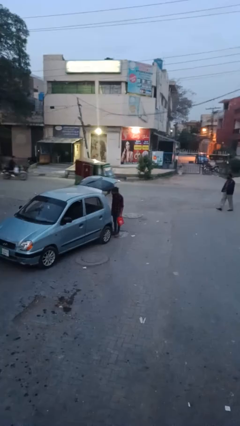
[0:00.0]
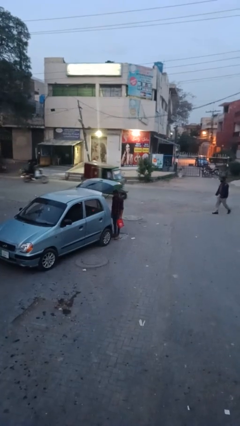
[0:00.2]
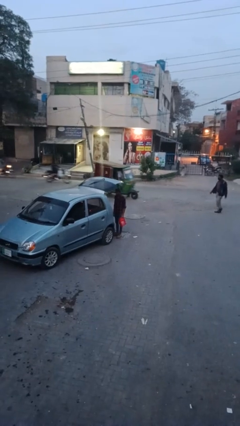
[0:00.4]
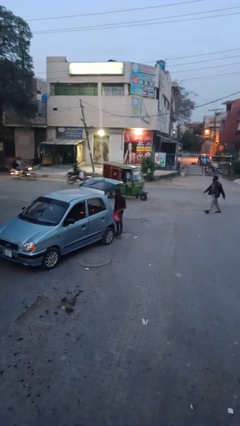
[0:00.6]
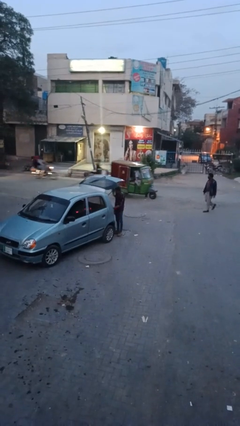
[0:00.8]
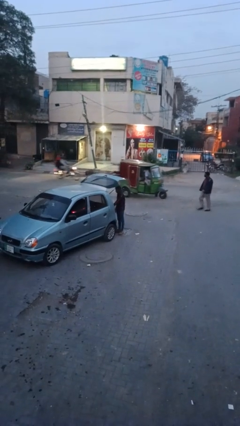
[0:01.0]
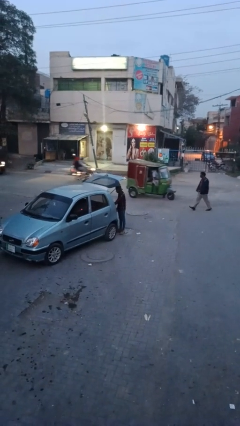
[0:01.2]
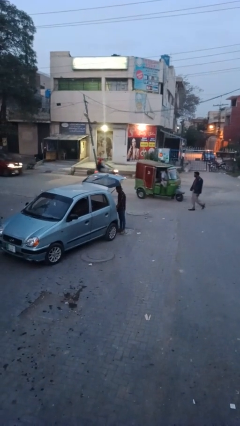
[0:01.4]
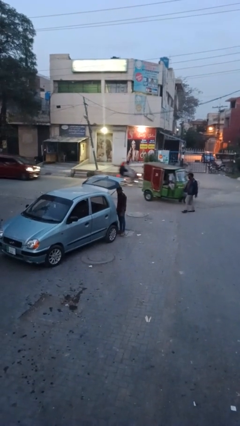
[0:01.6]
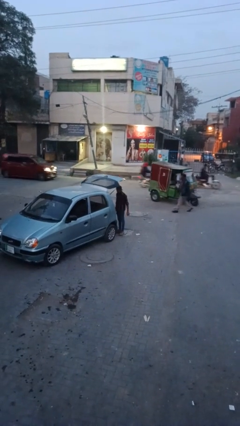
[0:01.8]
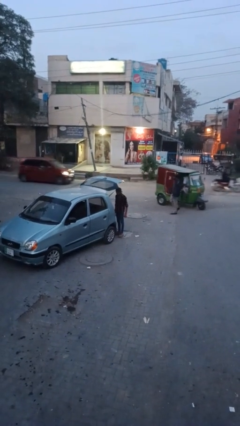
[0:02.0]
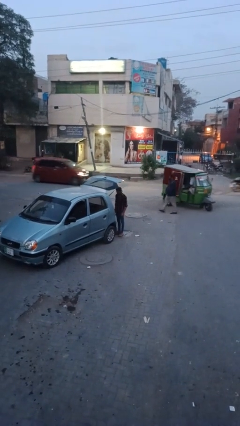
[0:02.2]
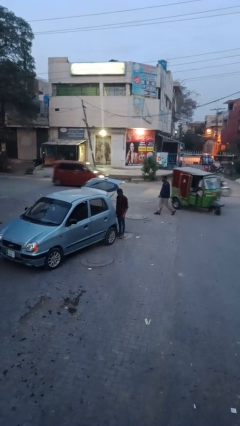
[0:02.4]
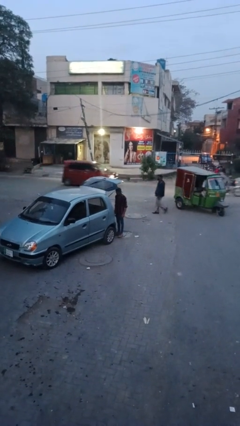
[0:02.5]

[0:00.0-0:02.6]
person loads car

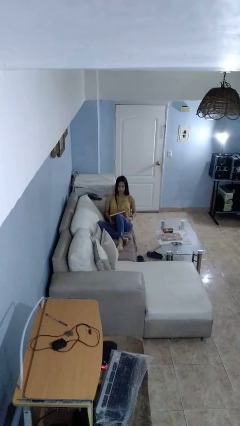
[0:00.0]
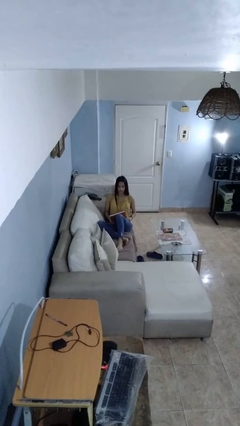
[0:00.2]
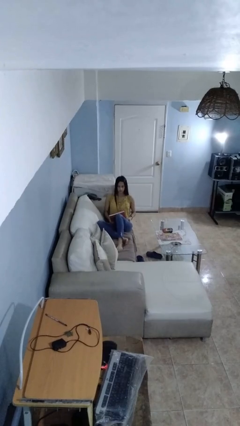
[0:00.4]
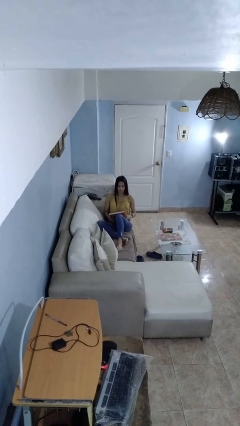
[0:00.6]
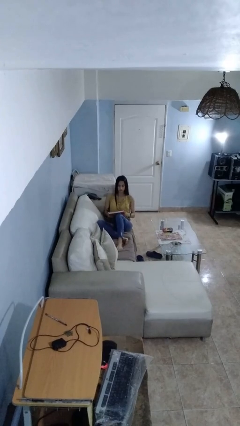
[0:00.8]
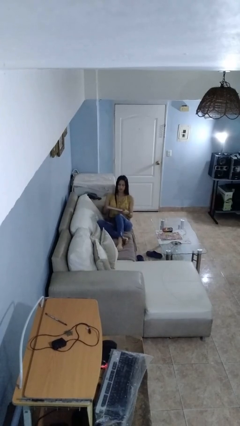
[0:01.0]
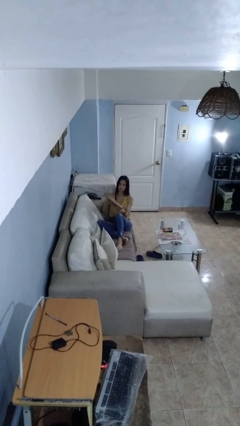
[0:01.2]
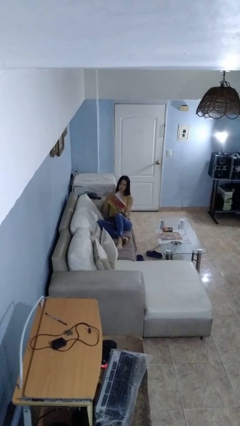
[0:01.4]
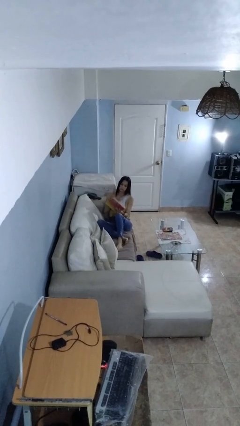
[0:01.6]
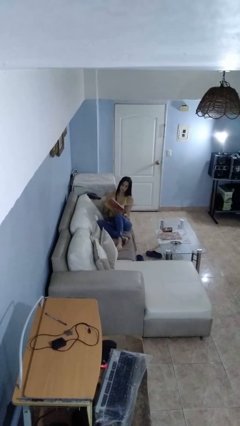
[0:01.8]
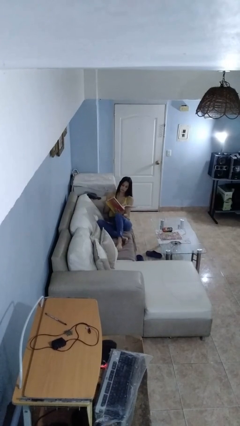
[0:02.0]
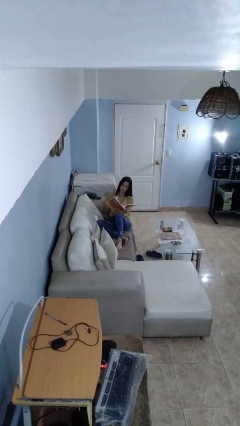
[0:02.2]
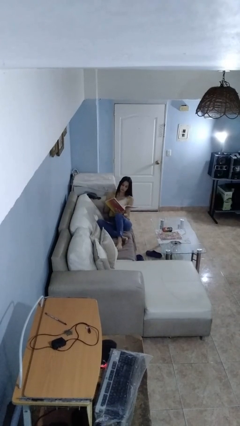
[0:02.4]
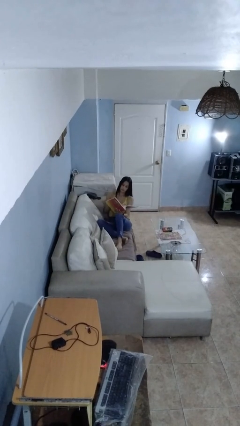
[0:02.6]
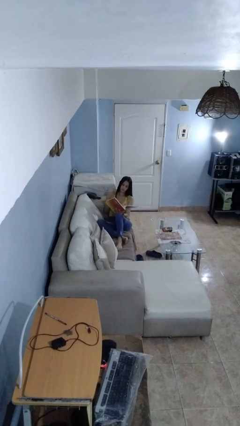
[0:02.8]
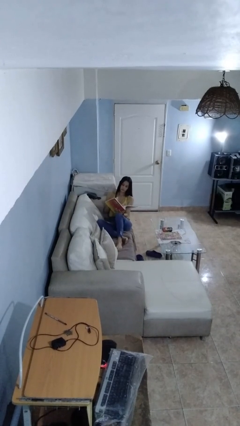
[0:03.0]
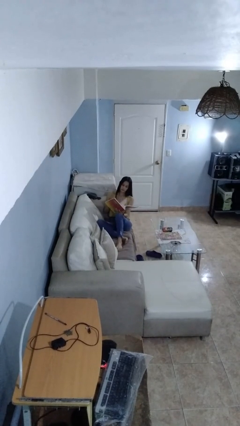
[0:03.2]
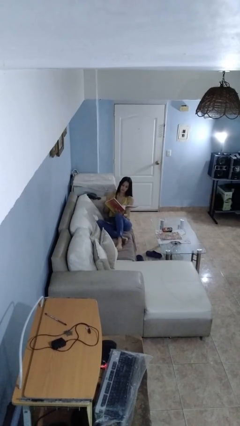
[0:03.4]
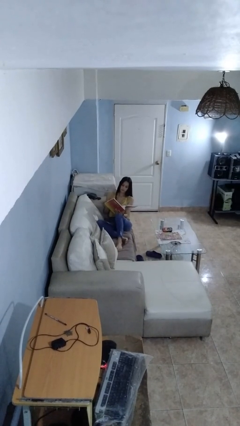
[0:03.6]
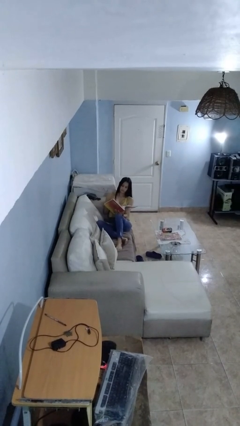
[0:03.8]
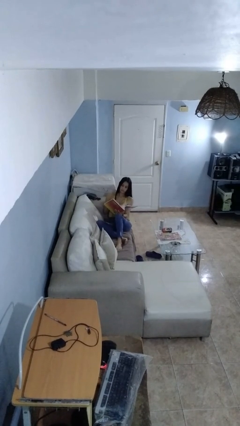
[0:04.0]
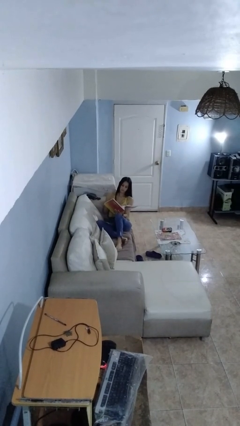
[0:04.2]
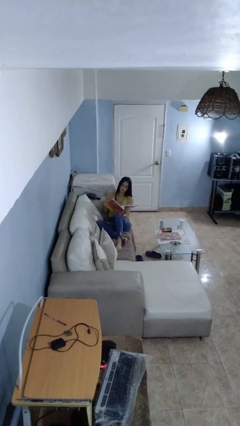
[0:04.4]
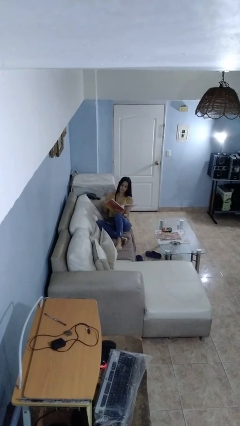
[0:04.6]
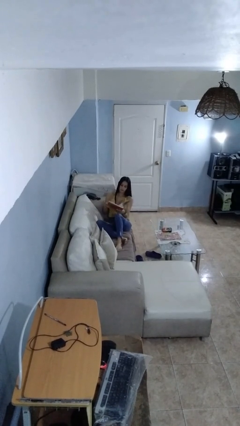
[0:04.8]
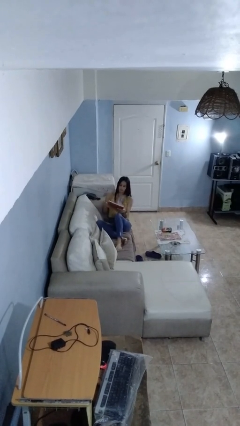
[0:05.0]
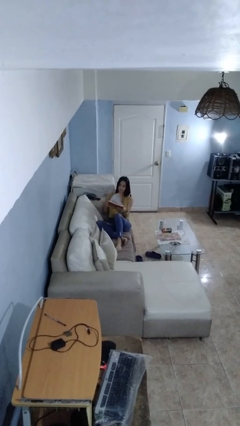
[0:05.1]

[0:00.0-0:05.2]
person reads book

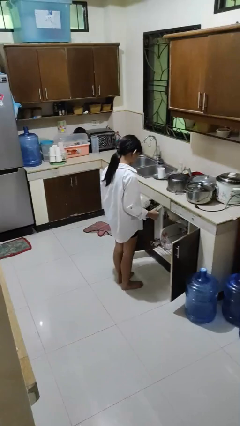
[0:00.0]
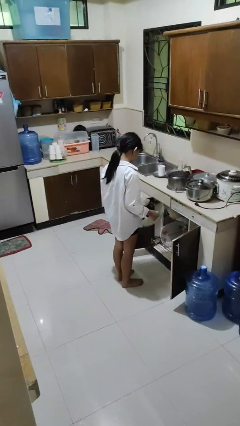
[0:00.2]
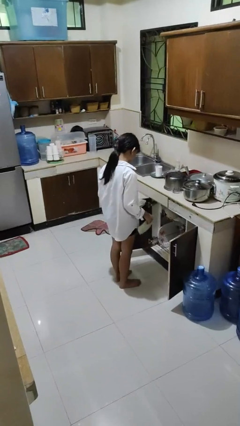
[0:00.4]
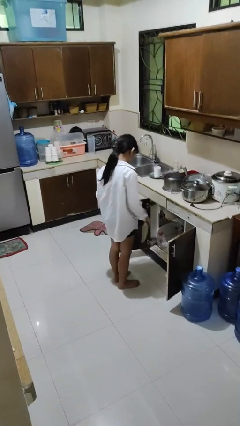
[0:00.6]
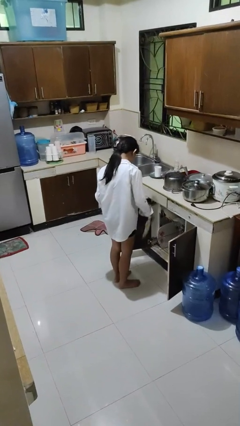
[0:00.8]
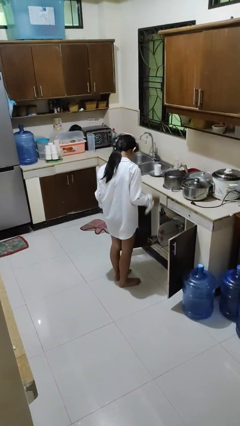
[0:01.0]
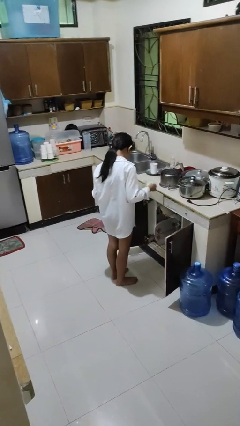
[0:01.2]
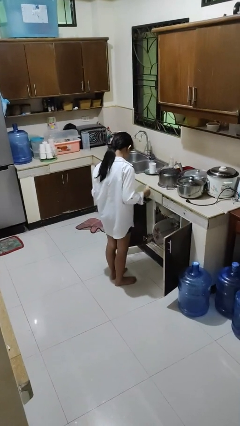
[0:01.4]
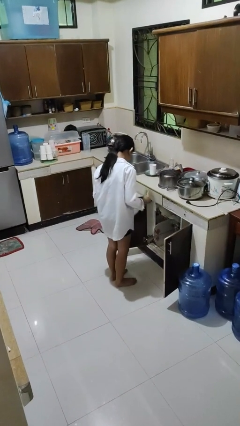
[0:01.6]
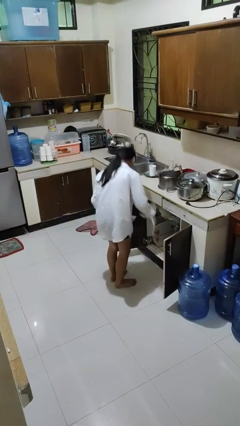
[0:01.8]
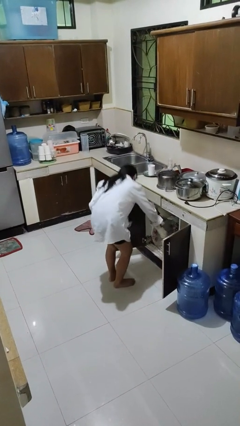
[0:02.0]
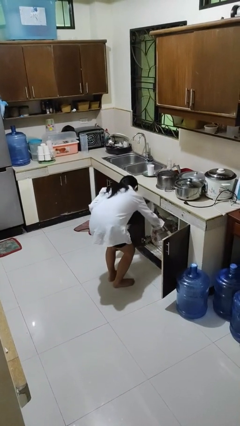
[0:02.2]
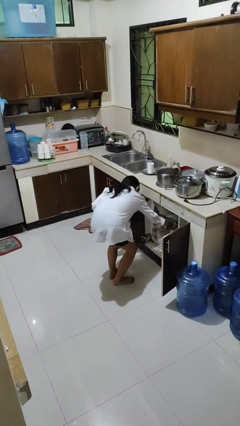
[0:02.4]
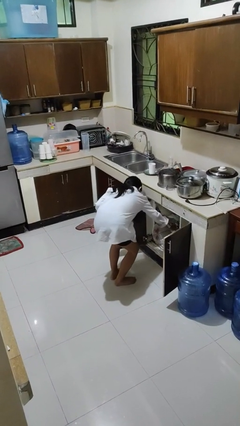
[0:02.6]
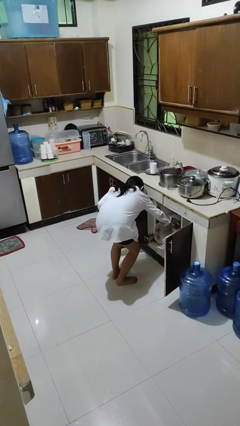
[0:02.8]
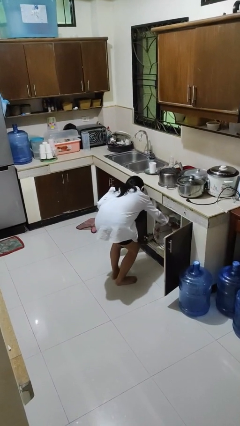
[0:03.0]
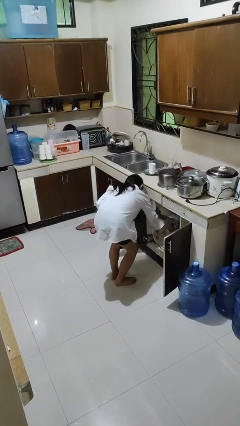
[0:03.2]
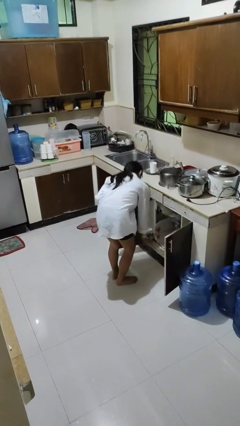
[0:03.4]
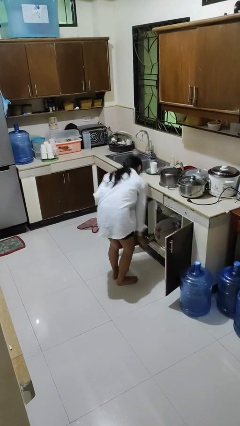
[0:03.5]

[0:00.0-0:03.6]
person loads dishwasher

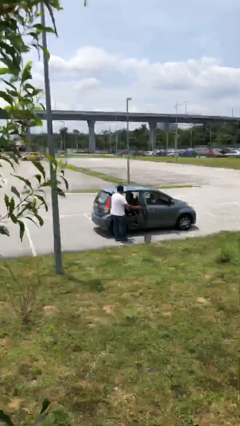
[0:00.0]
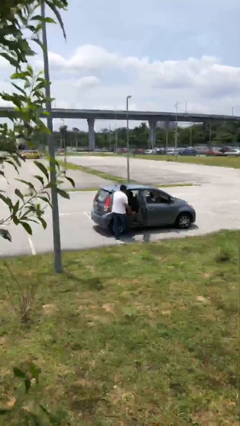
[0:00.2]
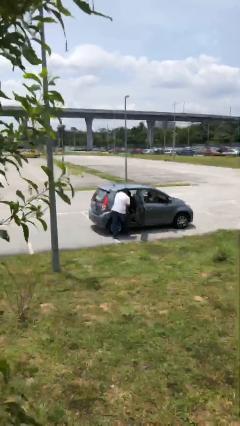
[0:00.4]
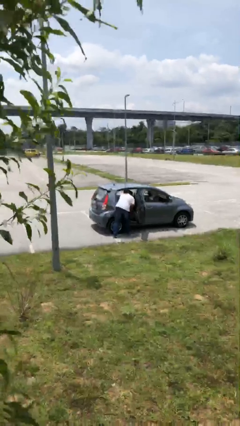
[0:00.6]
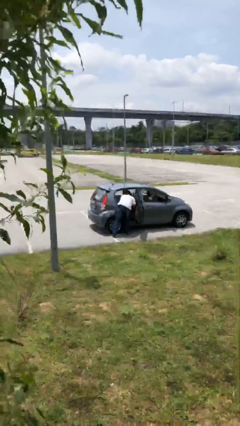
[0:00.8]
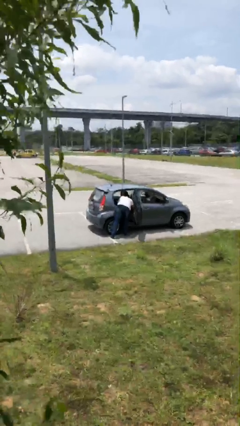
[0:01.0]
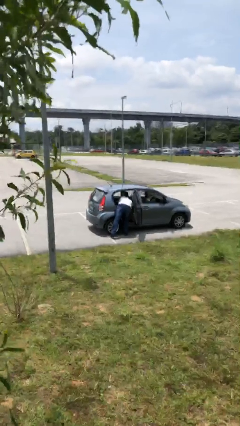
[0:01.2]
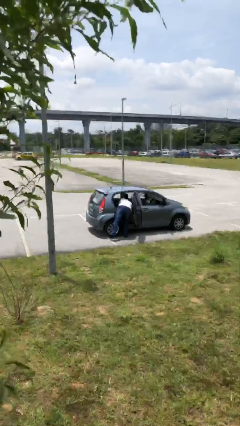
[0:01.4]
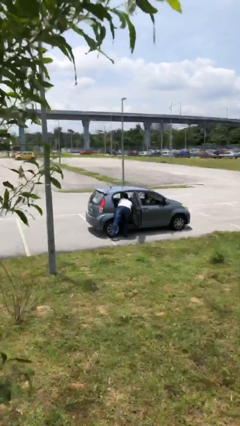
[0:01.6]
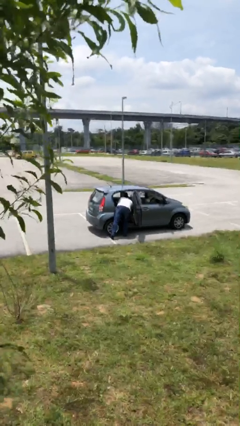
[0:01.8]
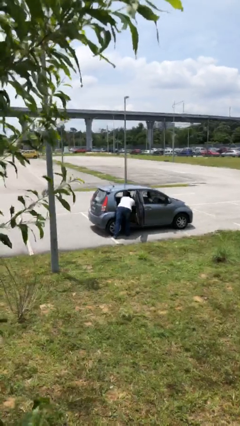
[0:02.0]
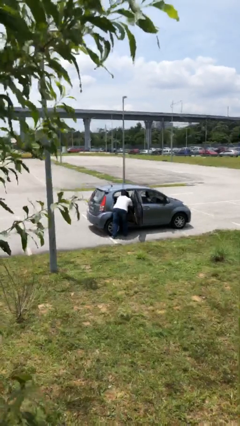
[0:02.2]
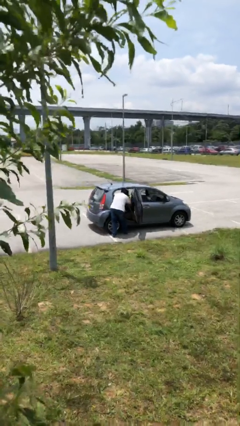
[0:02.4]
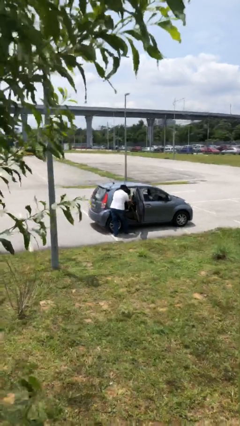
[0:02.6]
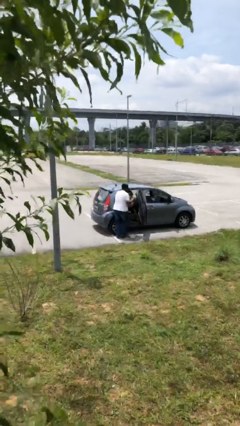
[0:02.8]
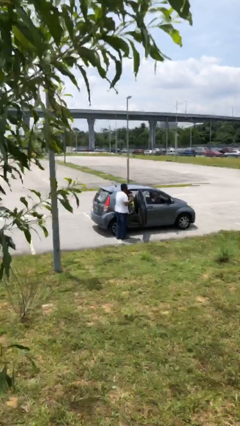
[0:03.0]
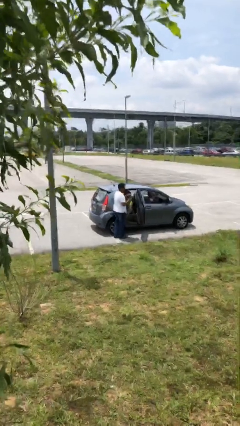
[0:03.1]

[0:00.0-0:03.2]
person unloads car

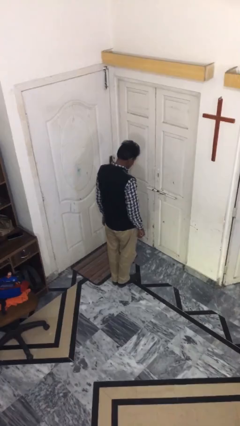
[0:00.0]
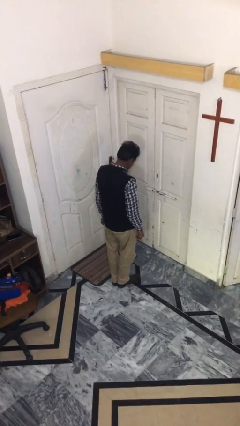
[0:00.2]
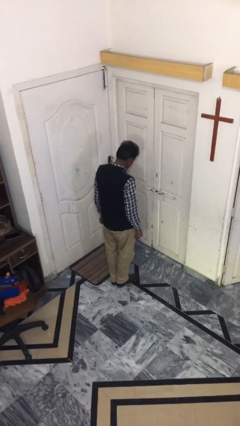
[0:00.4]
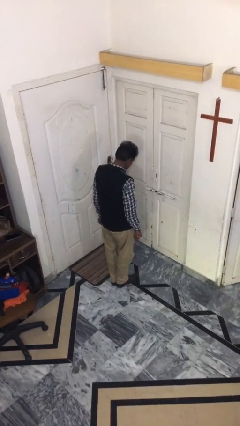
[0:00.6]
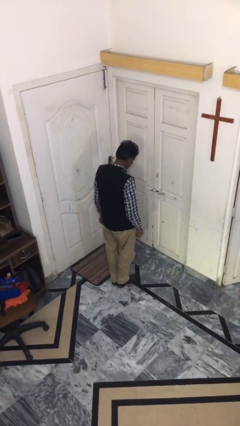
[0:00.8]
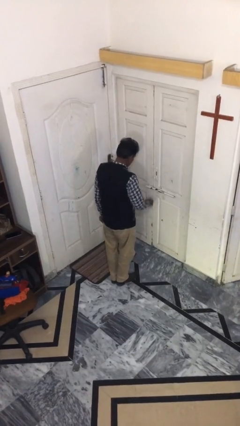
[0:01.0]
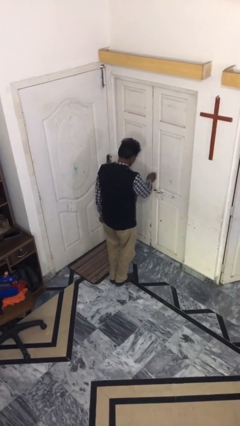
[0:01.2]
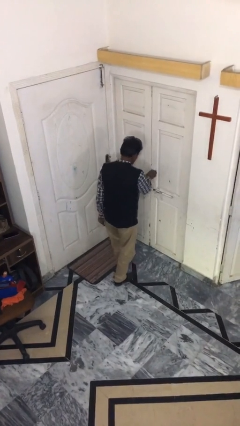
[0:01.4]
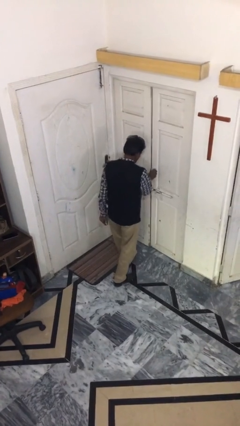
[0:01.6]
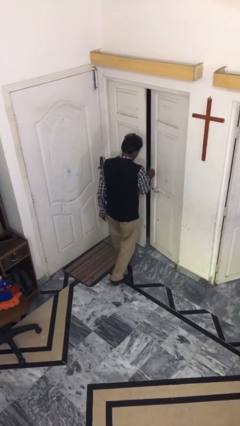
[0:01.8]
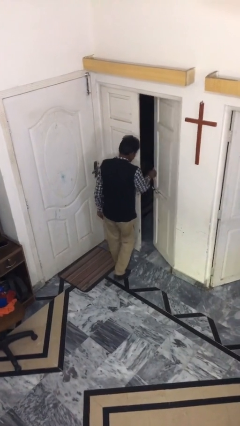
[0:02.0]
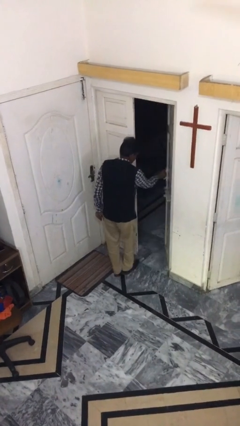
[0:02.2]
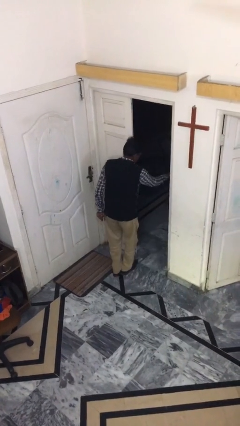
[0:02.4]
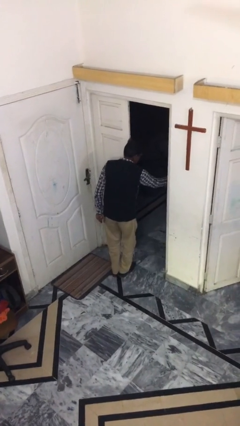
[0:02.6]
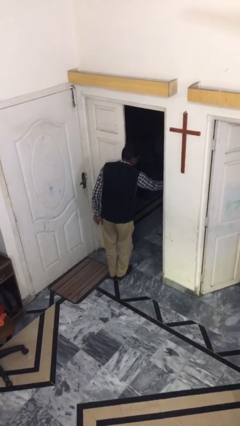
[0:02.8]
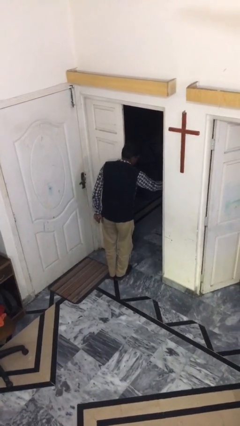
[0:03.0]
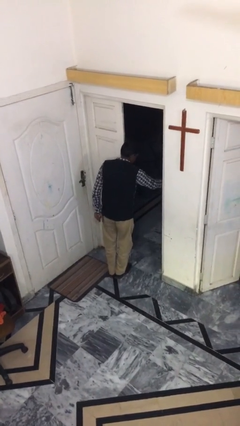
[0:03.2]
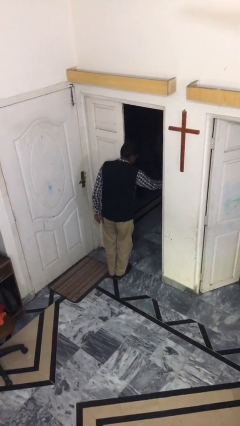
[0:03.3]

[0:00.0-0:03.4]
person opens facility door
